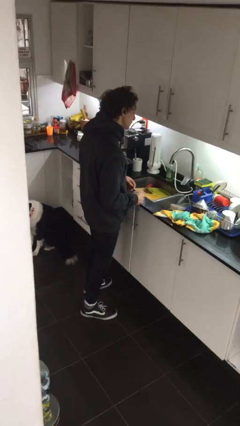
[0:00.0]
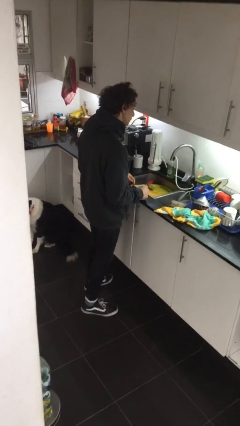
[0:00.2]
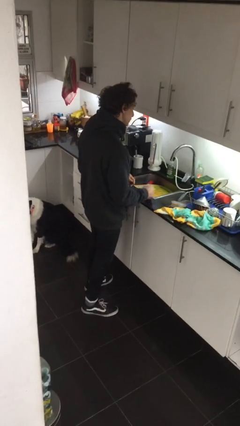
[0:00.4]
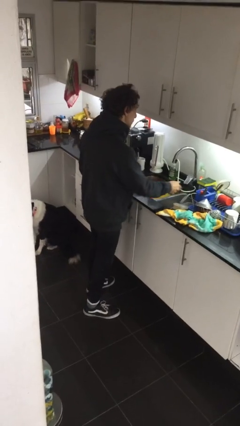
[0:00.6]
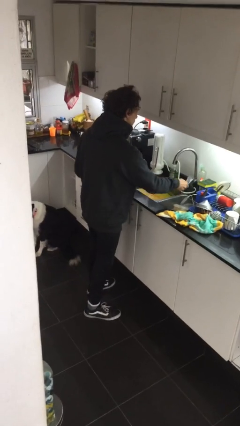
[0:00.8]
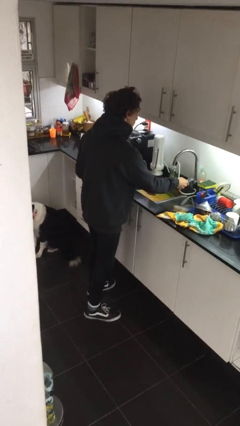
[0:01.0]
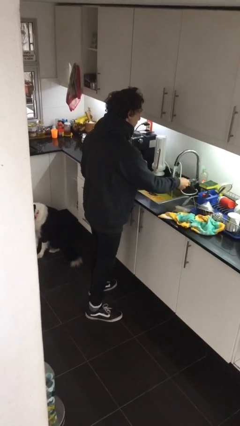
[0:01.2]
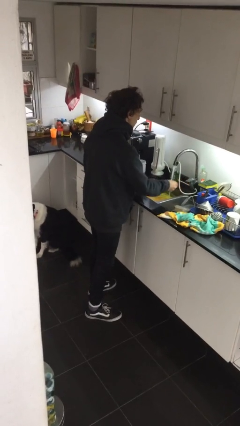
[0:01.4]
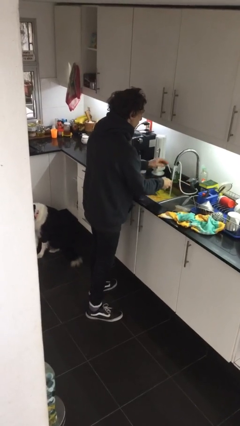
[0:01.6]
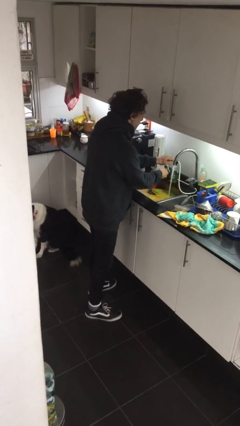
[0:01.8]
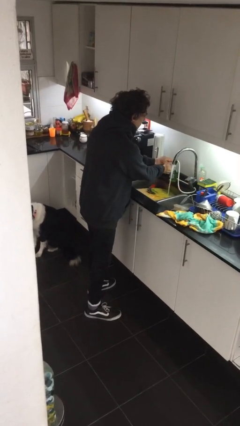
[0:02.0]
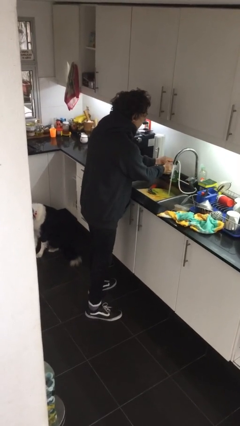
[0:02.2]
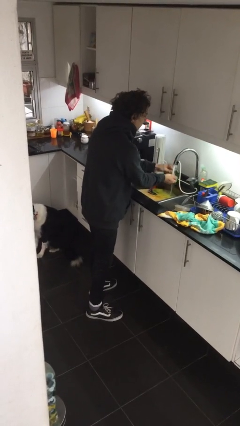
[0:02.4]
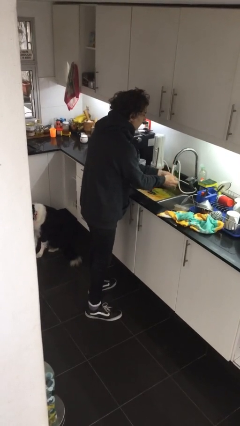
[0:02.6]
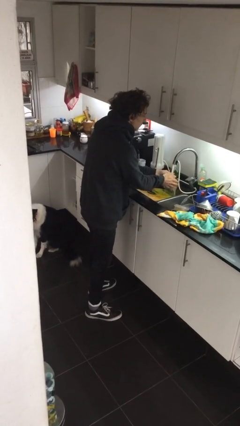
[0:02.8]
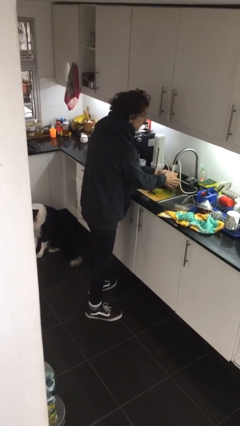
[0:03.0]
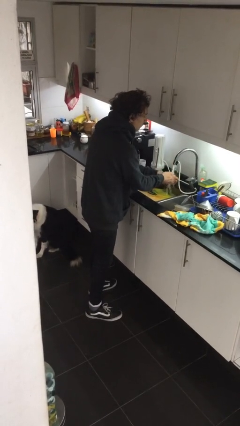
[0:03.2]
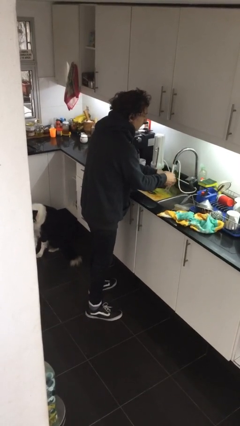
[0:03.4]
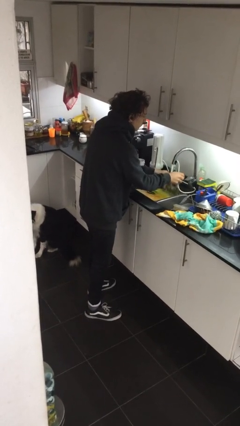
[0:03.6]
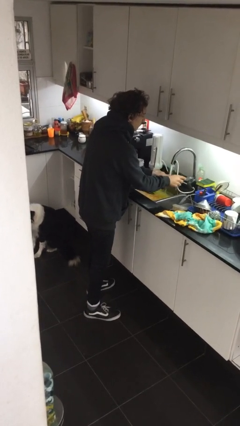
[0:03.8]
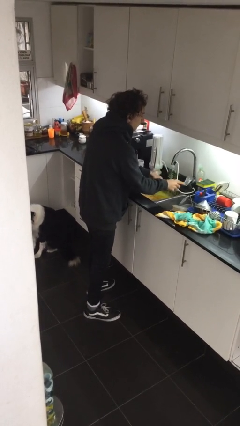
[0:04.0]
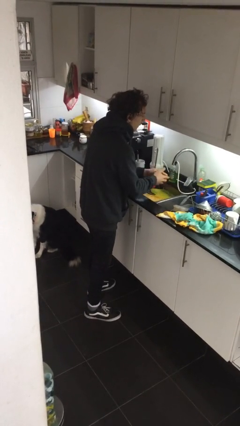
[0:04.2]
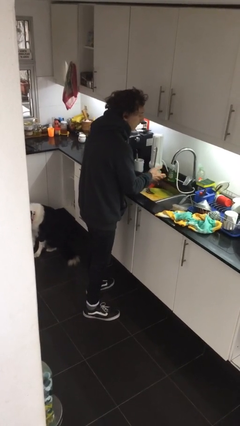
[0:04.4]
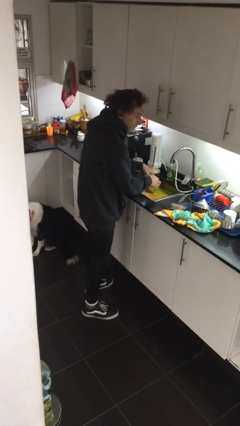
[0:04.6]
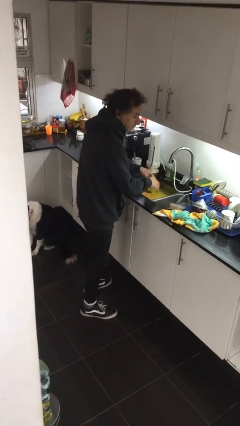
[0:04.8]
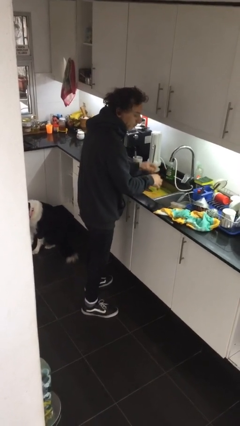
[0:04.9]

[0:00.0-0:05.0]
person washes hands

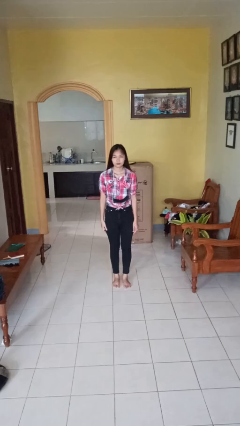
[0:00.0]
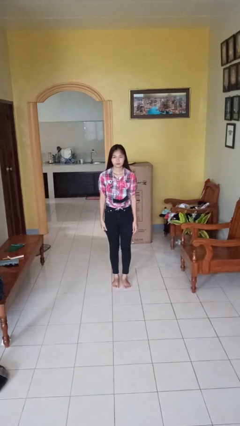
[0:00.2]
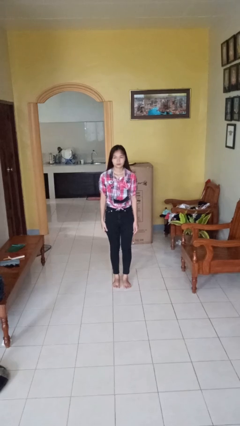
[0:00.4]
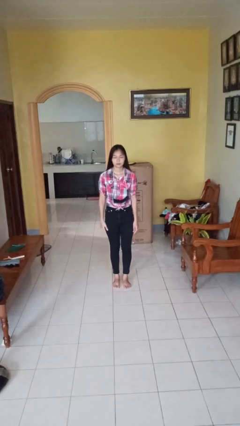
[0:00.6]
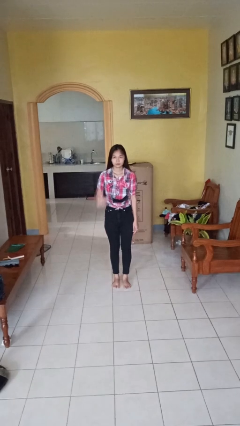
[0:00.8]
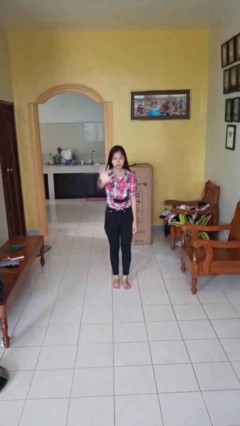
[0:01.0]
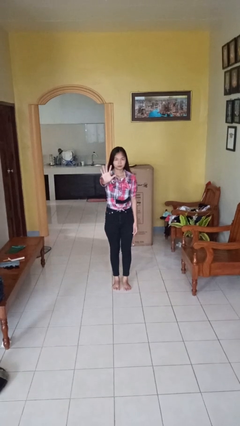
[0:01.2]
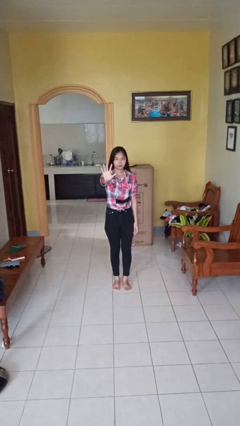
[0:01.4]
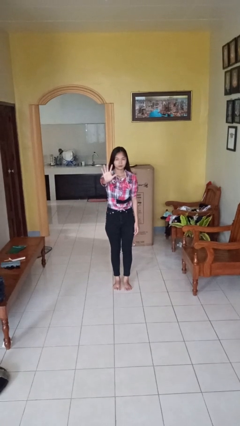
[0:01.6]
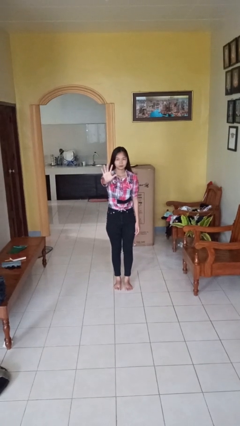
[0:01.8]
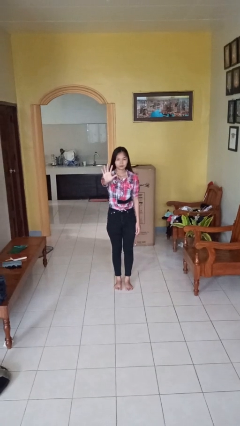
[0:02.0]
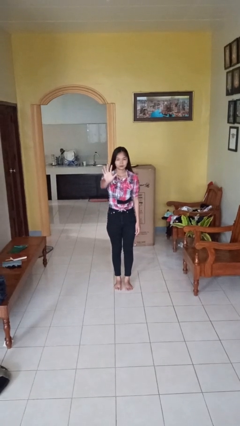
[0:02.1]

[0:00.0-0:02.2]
person gestures number five

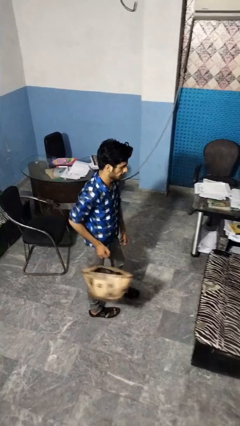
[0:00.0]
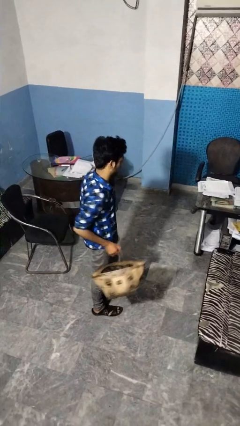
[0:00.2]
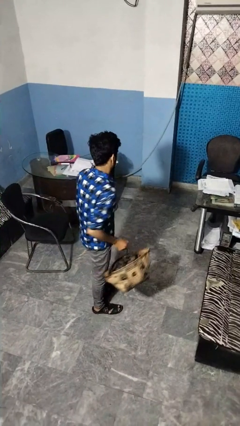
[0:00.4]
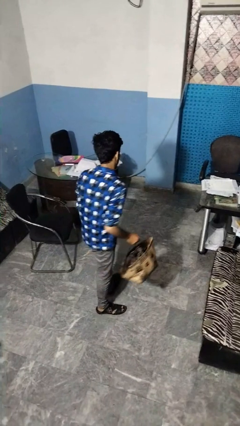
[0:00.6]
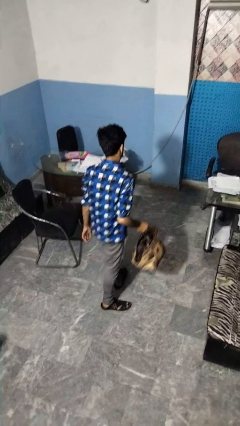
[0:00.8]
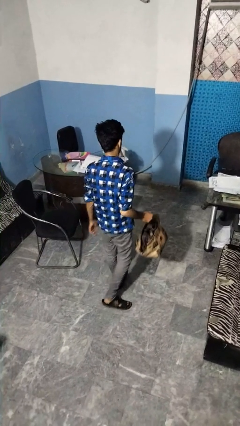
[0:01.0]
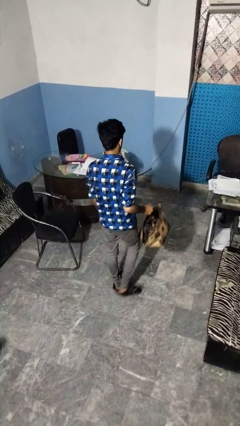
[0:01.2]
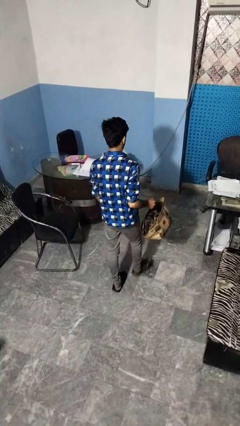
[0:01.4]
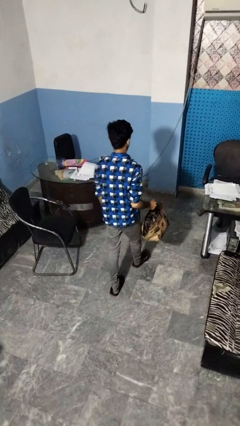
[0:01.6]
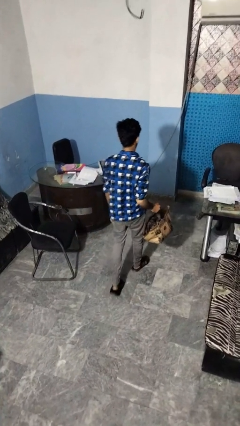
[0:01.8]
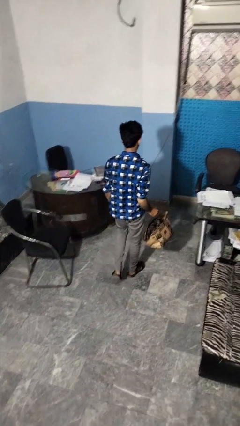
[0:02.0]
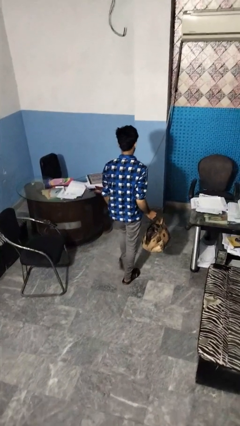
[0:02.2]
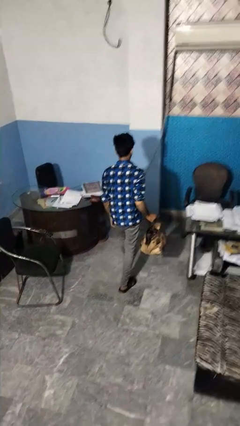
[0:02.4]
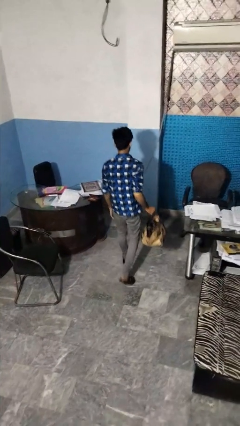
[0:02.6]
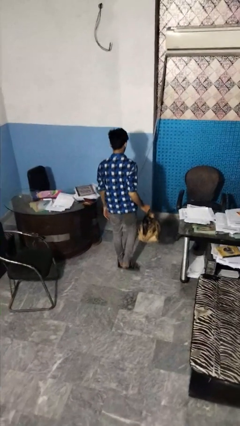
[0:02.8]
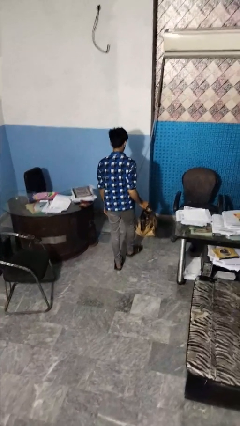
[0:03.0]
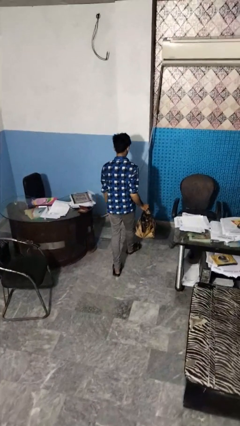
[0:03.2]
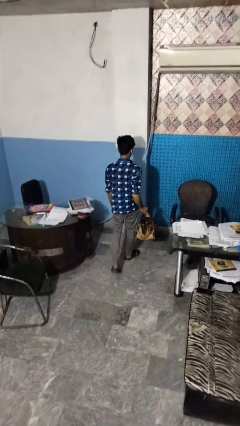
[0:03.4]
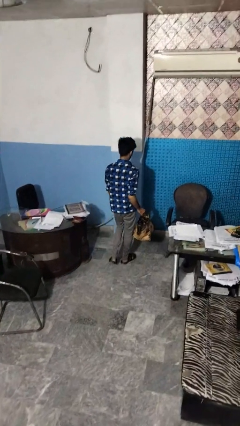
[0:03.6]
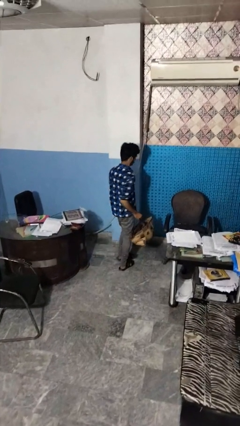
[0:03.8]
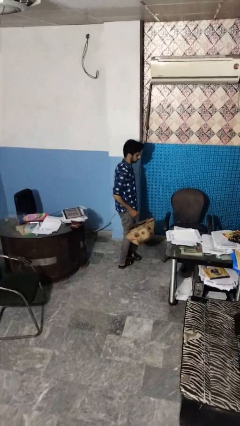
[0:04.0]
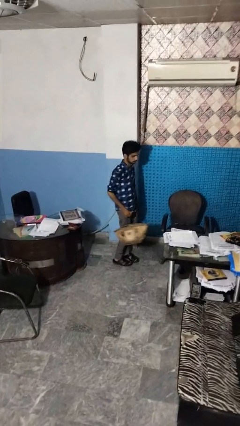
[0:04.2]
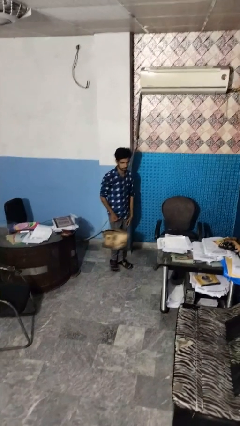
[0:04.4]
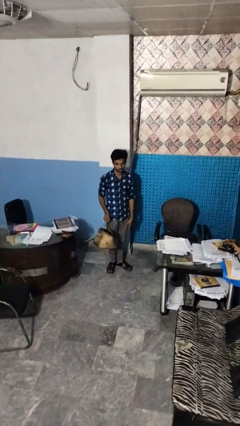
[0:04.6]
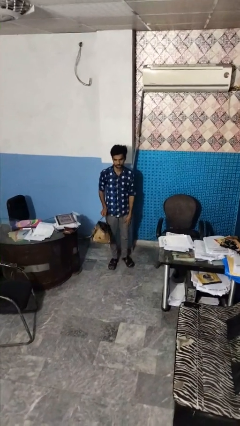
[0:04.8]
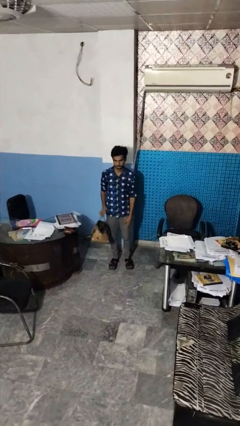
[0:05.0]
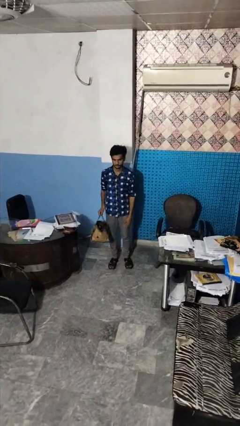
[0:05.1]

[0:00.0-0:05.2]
person carries groceries

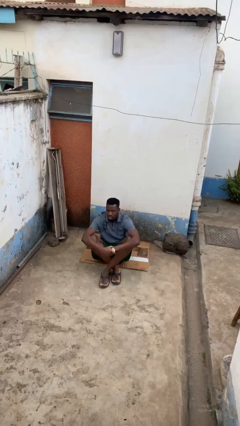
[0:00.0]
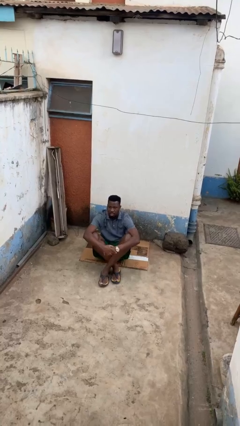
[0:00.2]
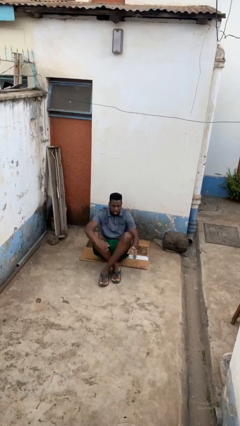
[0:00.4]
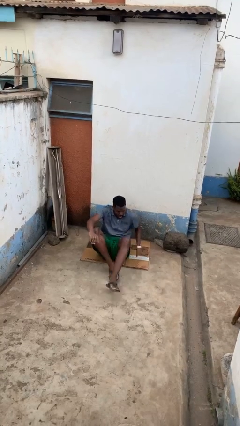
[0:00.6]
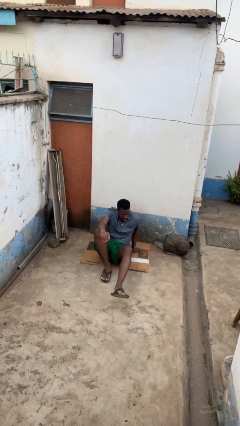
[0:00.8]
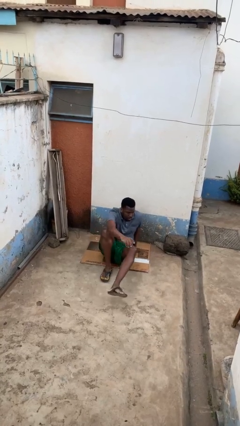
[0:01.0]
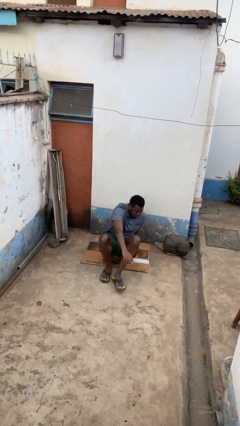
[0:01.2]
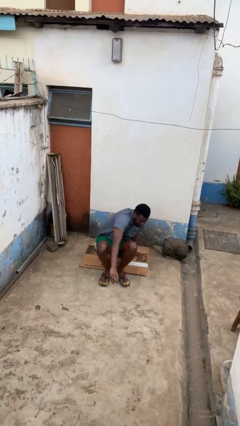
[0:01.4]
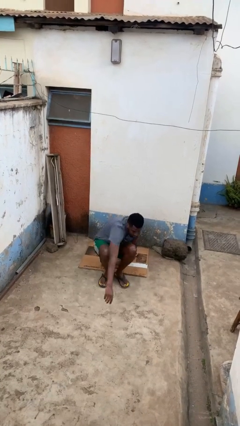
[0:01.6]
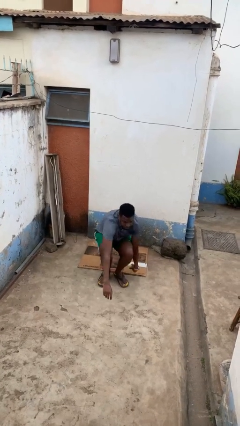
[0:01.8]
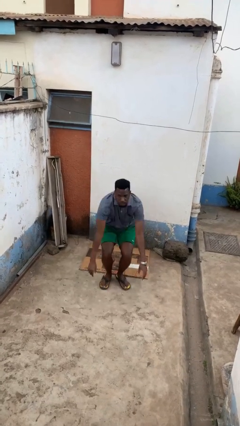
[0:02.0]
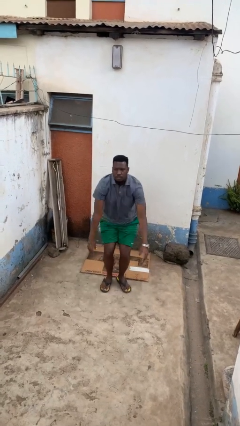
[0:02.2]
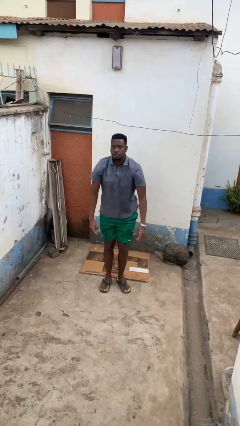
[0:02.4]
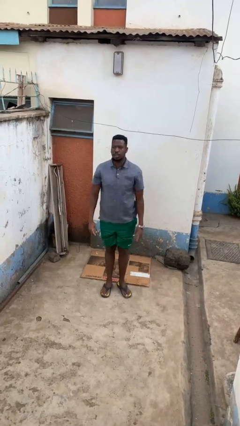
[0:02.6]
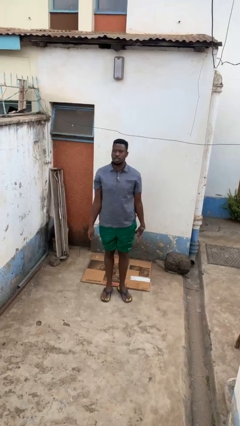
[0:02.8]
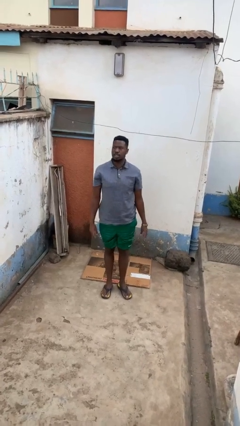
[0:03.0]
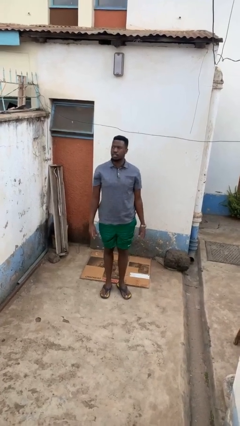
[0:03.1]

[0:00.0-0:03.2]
person stands up from floor

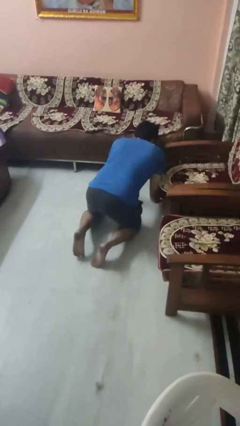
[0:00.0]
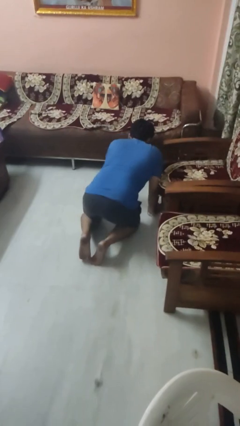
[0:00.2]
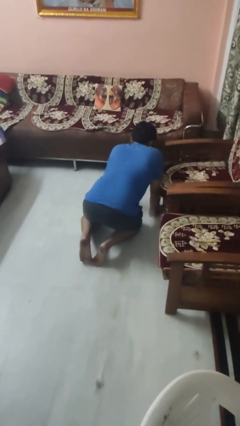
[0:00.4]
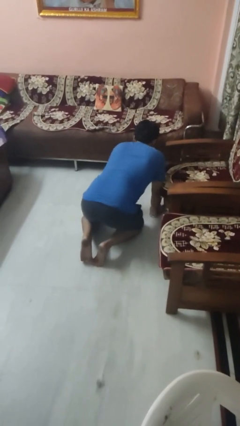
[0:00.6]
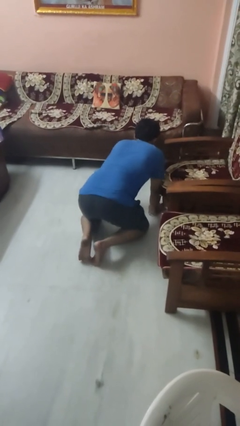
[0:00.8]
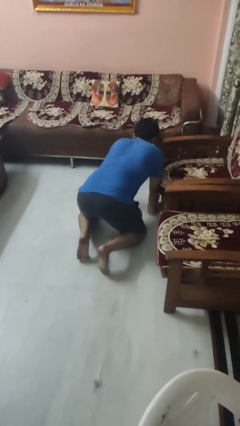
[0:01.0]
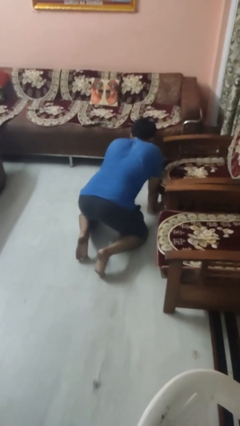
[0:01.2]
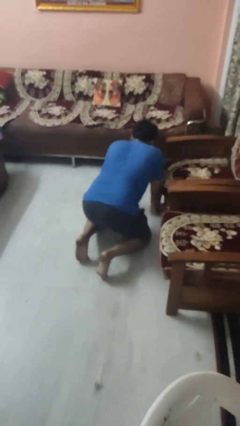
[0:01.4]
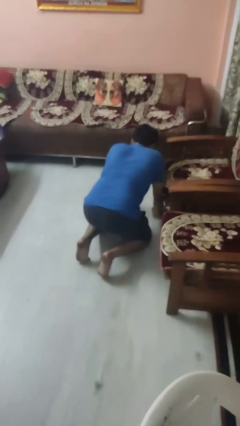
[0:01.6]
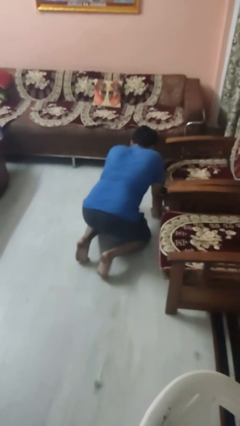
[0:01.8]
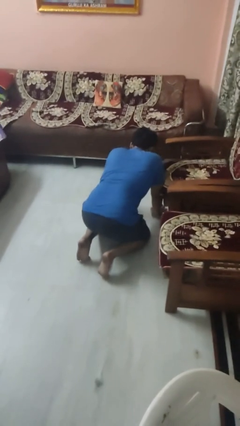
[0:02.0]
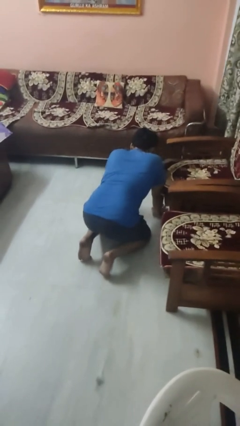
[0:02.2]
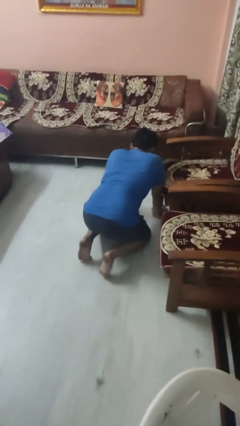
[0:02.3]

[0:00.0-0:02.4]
person crawls
